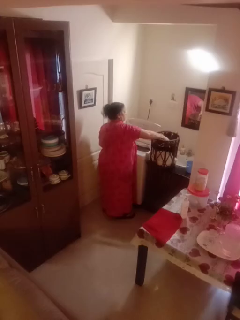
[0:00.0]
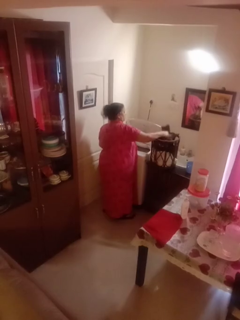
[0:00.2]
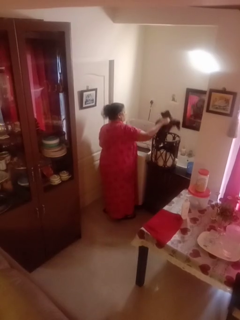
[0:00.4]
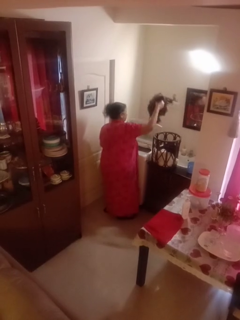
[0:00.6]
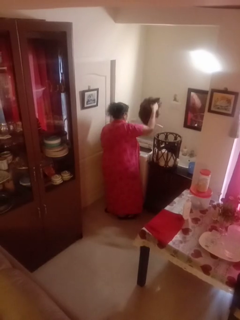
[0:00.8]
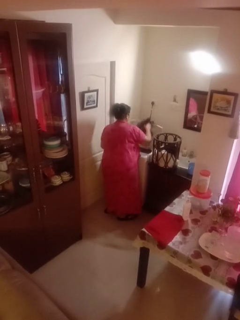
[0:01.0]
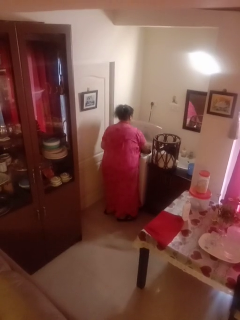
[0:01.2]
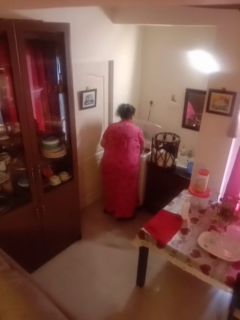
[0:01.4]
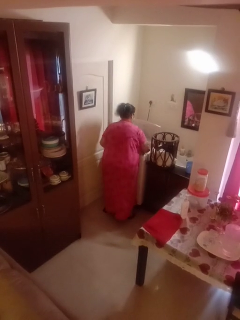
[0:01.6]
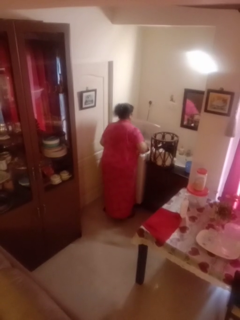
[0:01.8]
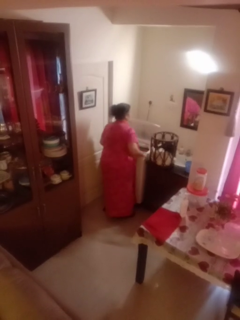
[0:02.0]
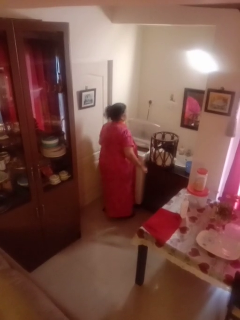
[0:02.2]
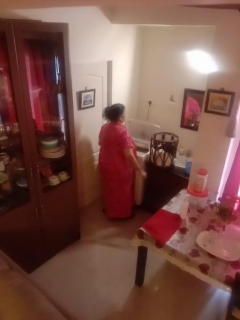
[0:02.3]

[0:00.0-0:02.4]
person loads clotheswasher

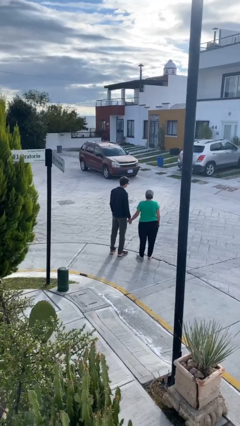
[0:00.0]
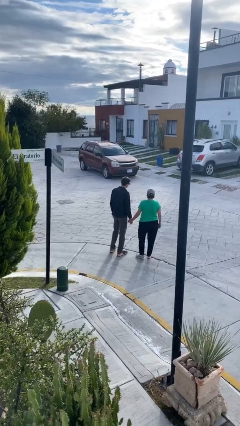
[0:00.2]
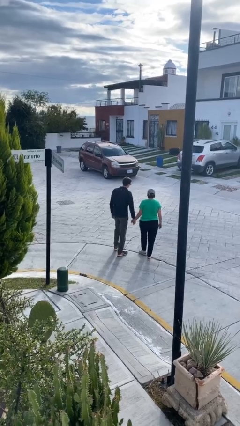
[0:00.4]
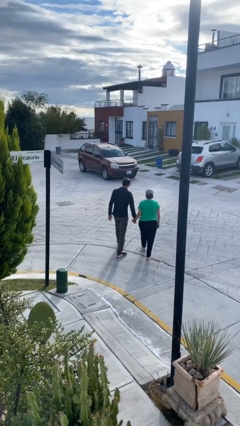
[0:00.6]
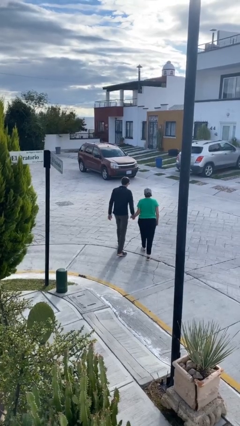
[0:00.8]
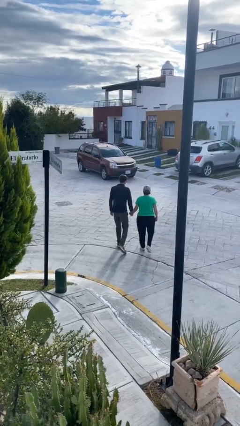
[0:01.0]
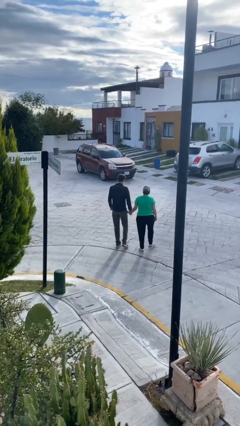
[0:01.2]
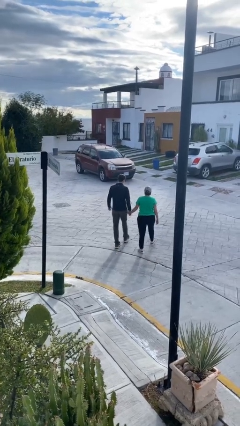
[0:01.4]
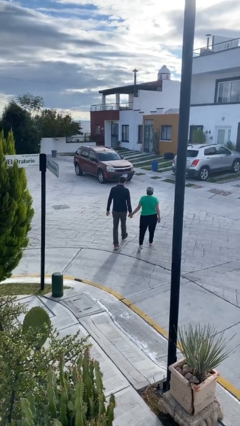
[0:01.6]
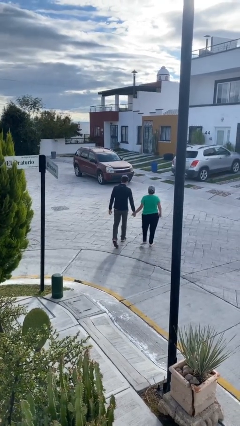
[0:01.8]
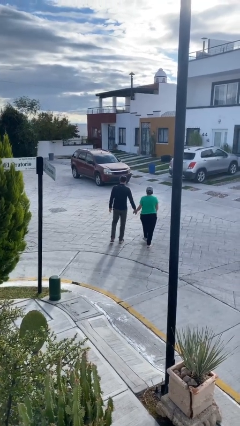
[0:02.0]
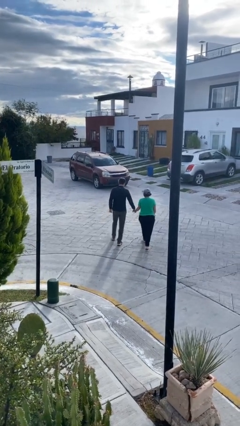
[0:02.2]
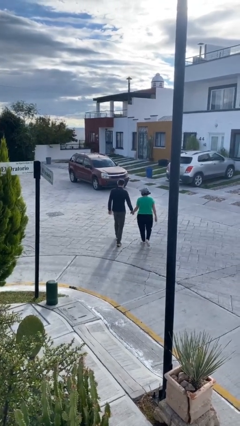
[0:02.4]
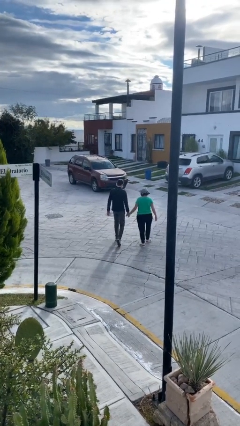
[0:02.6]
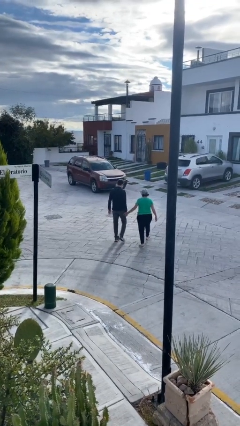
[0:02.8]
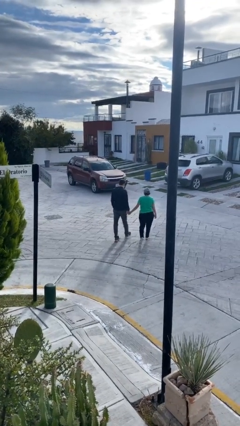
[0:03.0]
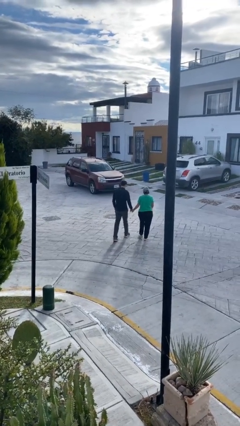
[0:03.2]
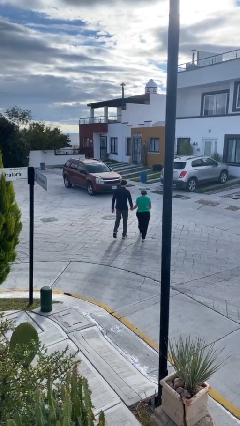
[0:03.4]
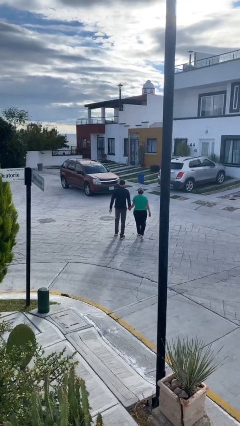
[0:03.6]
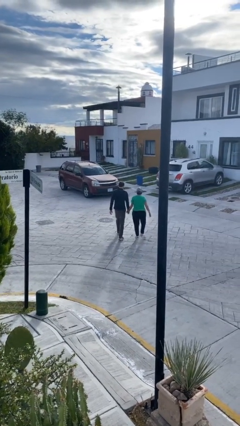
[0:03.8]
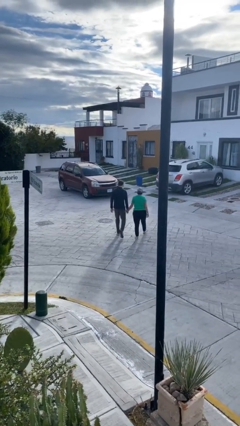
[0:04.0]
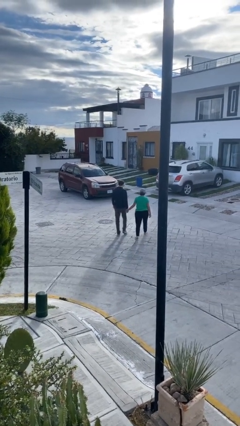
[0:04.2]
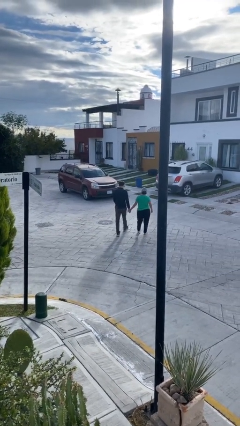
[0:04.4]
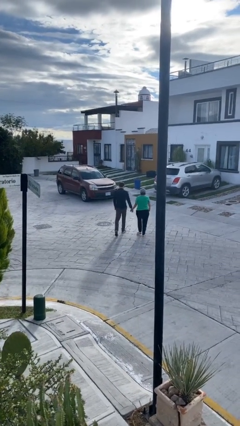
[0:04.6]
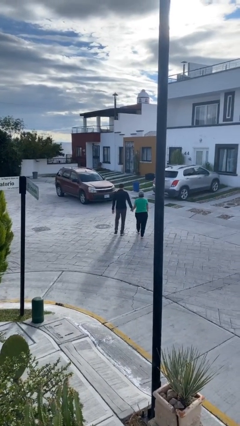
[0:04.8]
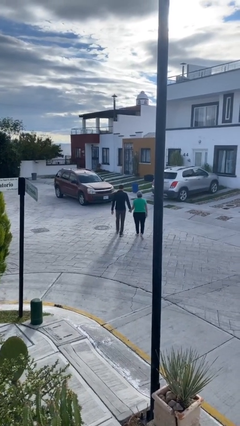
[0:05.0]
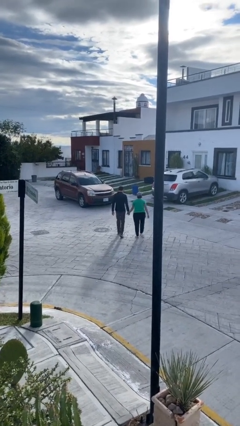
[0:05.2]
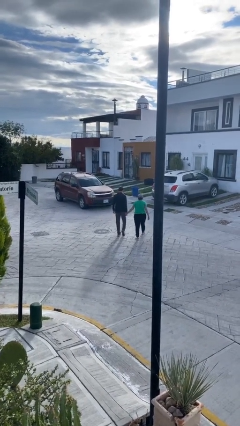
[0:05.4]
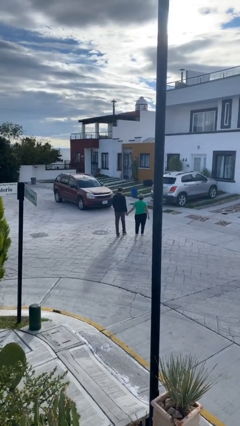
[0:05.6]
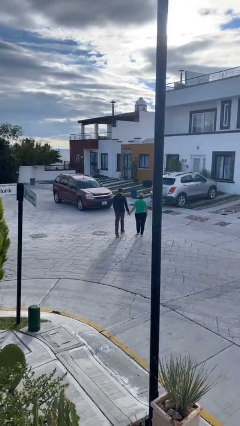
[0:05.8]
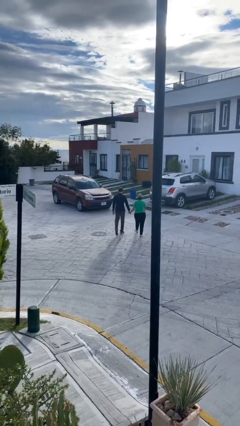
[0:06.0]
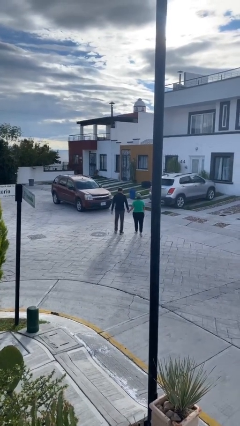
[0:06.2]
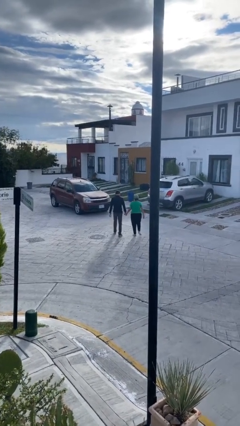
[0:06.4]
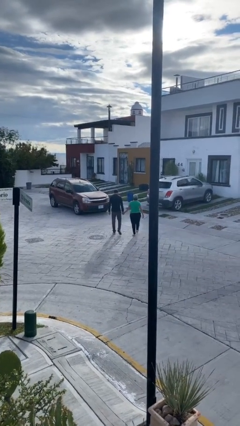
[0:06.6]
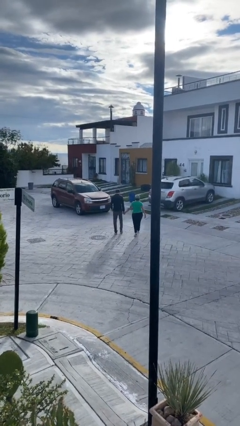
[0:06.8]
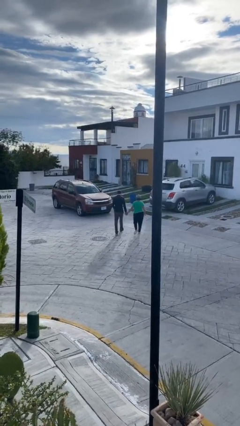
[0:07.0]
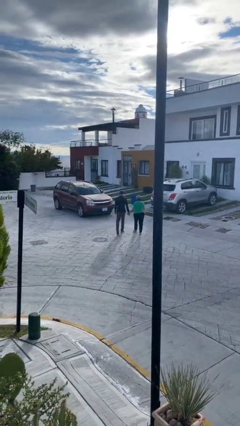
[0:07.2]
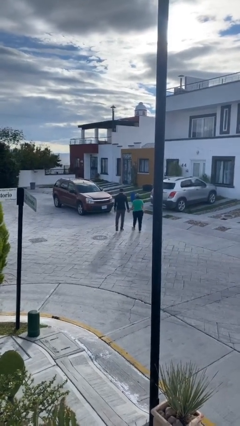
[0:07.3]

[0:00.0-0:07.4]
person holds hand

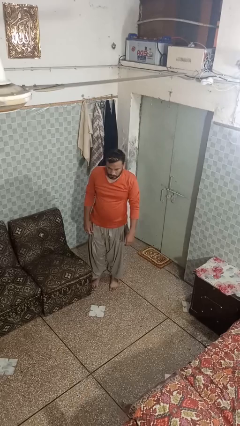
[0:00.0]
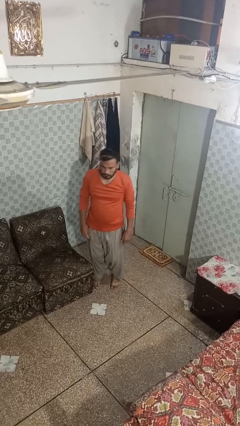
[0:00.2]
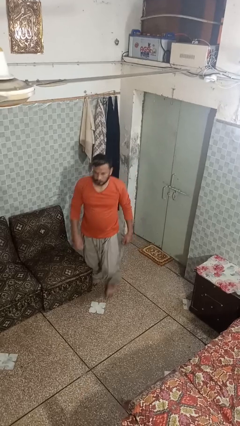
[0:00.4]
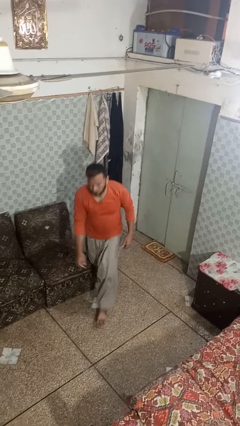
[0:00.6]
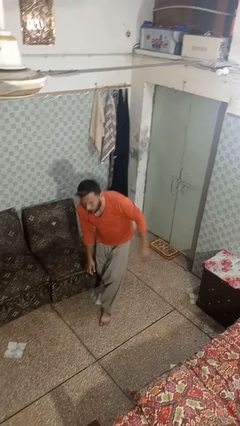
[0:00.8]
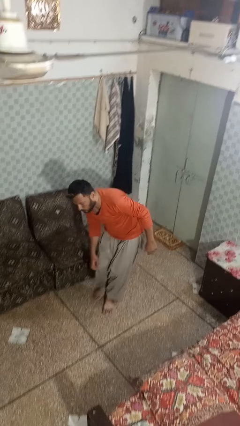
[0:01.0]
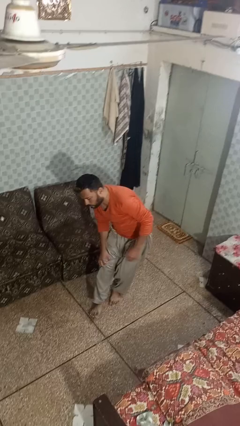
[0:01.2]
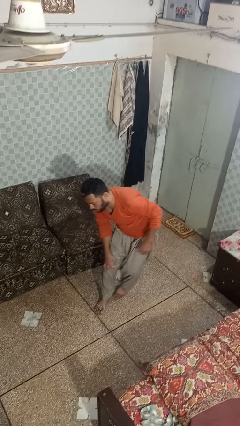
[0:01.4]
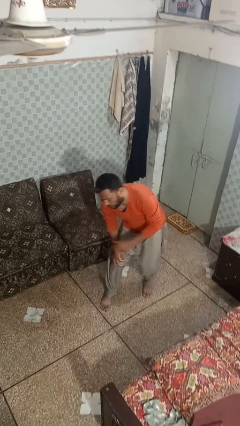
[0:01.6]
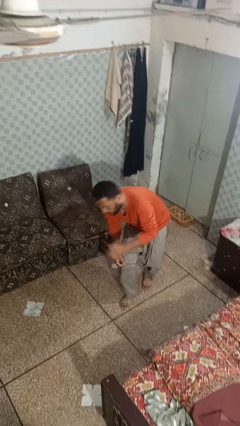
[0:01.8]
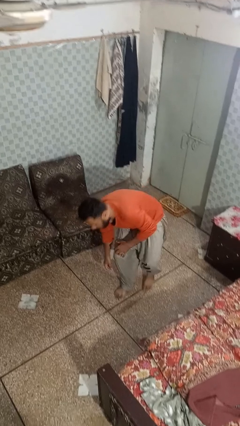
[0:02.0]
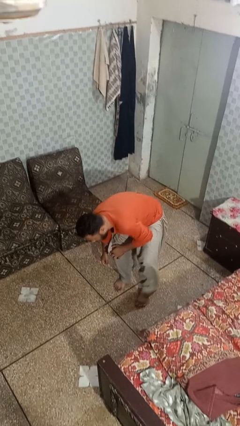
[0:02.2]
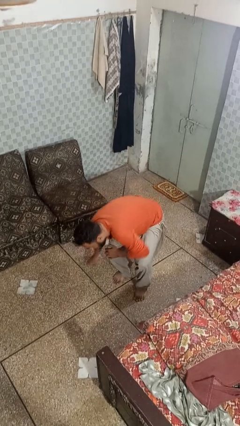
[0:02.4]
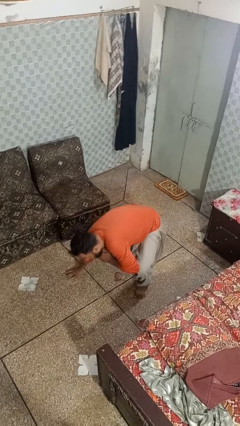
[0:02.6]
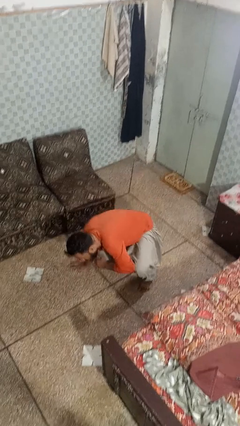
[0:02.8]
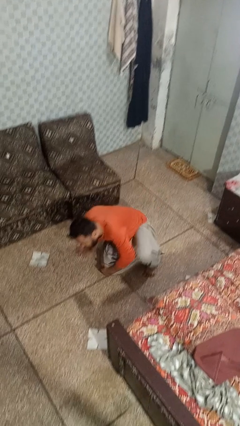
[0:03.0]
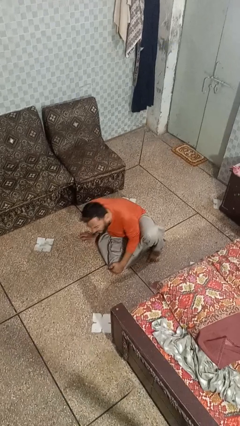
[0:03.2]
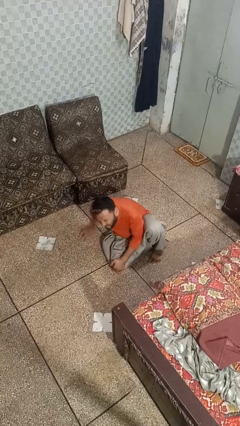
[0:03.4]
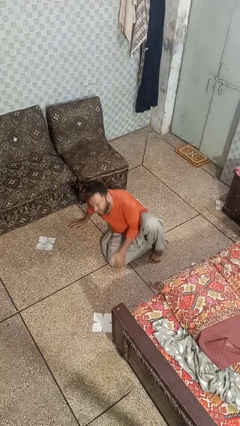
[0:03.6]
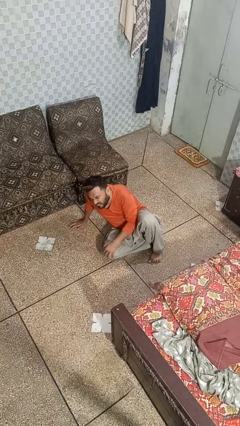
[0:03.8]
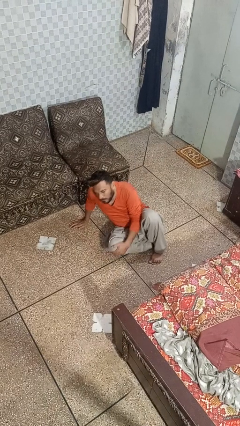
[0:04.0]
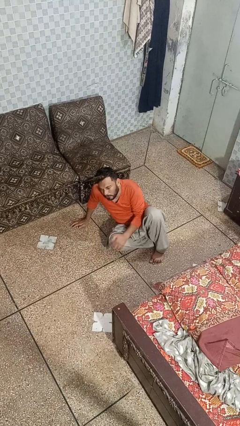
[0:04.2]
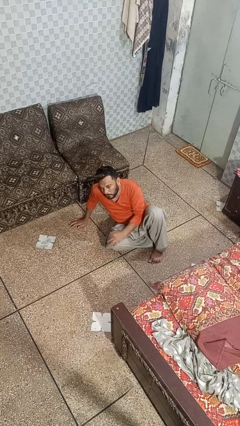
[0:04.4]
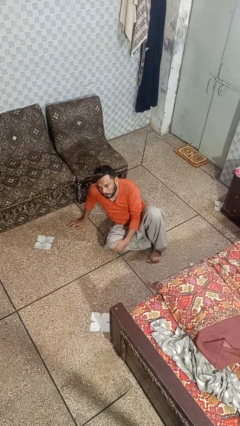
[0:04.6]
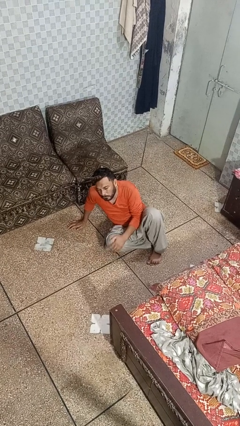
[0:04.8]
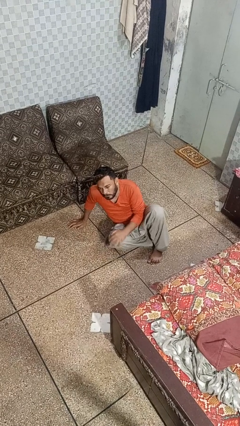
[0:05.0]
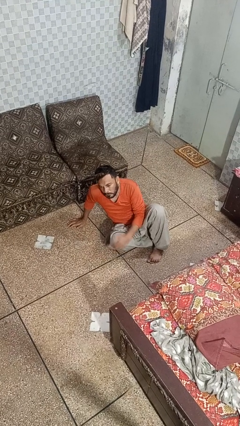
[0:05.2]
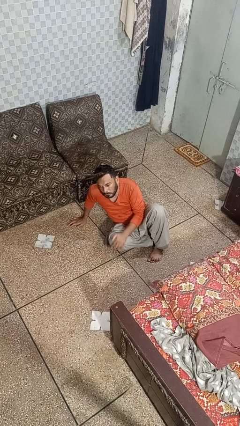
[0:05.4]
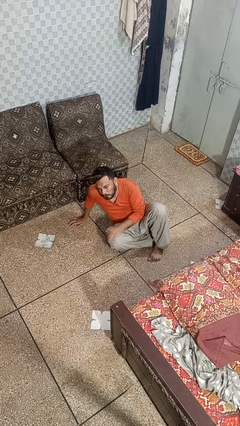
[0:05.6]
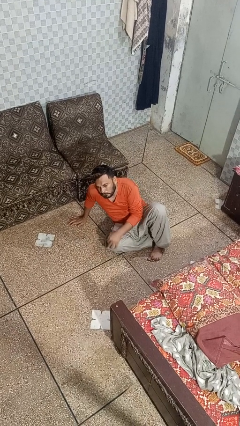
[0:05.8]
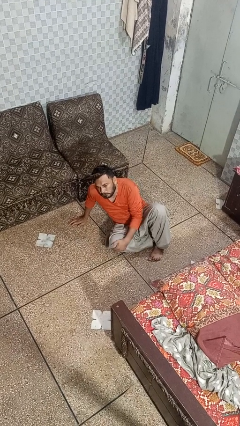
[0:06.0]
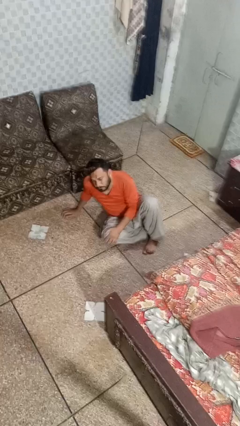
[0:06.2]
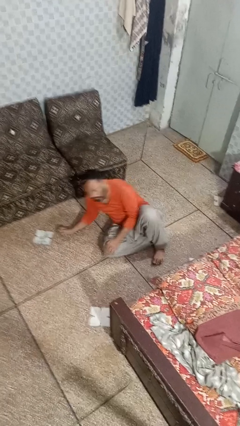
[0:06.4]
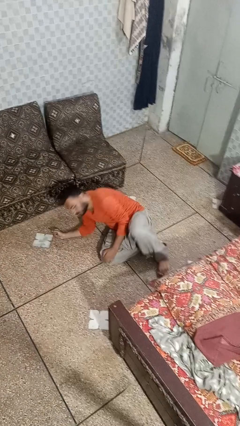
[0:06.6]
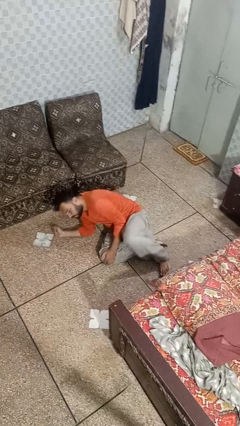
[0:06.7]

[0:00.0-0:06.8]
person trips on object on floor

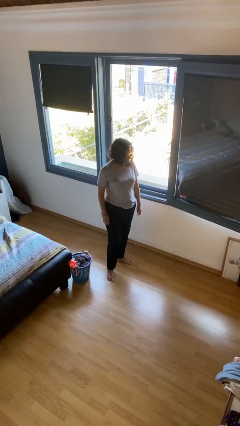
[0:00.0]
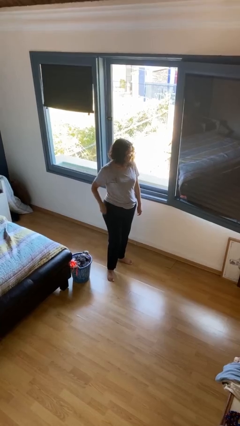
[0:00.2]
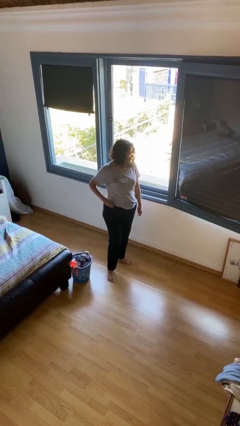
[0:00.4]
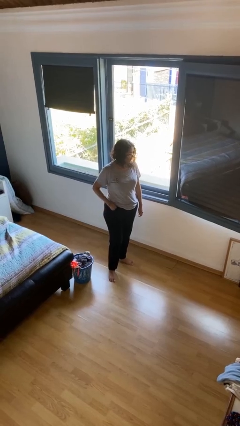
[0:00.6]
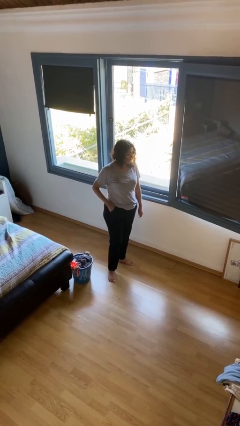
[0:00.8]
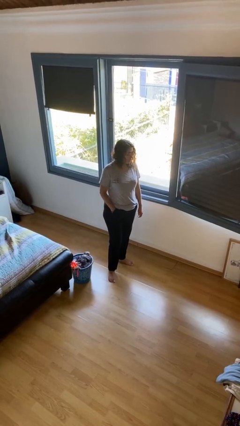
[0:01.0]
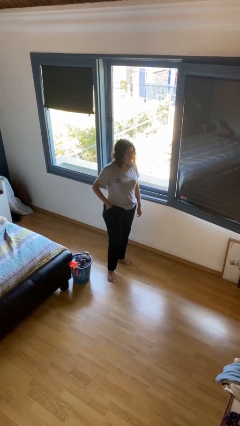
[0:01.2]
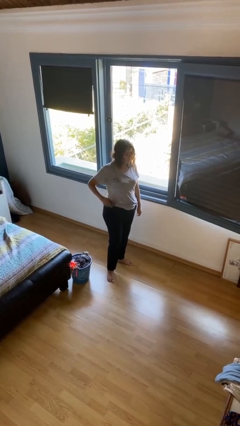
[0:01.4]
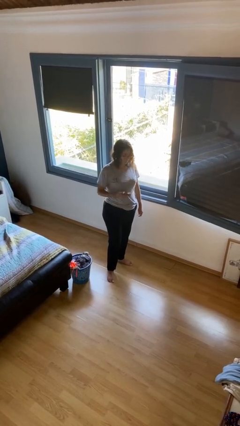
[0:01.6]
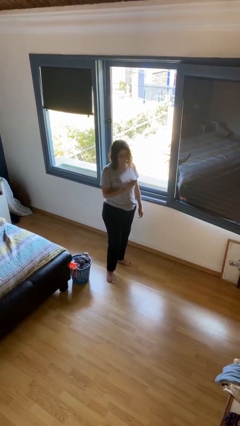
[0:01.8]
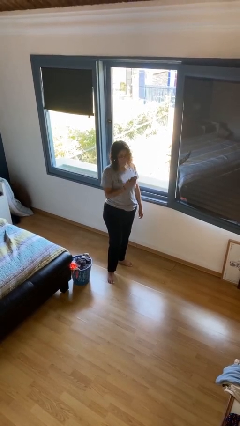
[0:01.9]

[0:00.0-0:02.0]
person takes phone from pocket

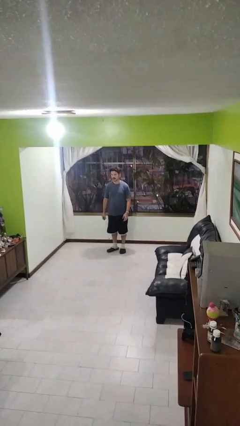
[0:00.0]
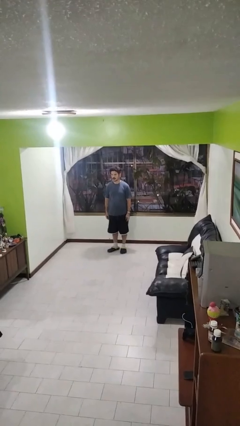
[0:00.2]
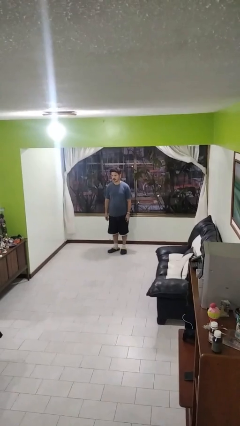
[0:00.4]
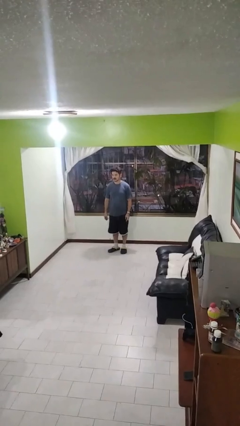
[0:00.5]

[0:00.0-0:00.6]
person takes off ring
